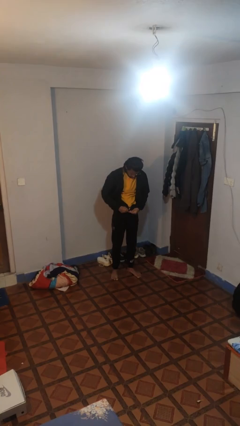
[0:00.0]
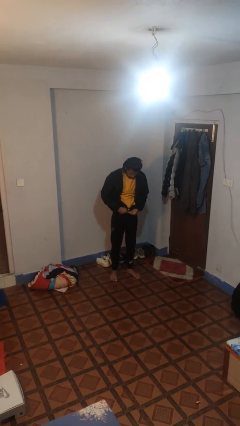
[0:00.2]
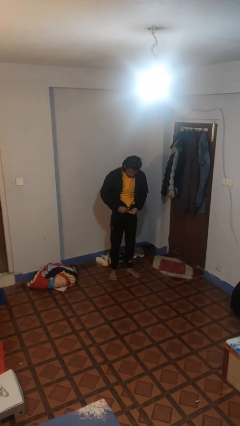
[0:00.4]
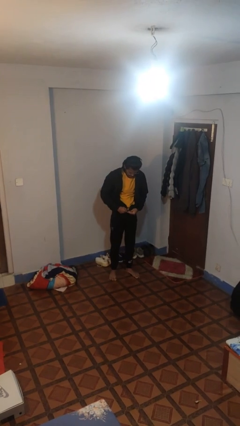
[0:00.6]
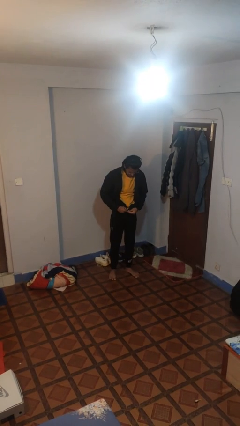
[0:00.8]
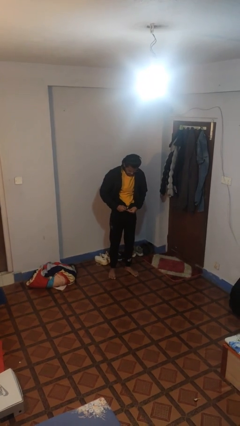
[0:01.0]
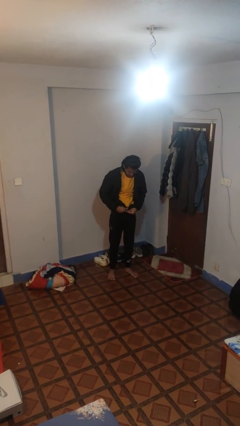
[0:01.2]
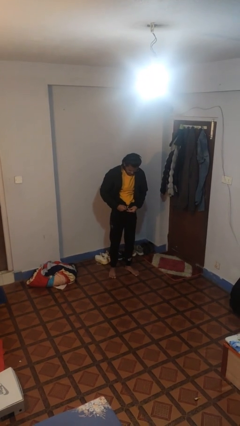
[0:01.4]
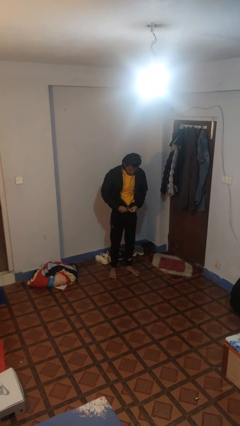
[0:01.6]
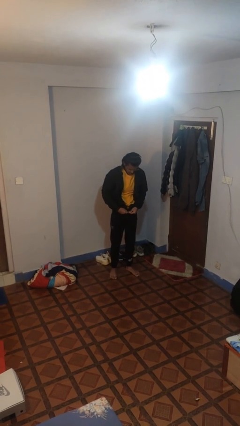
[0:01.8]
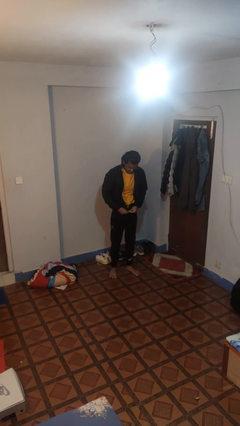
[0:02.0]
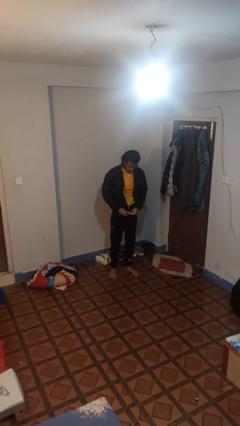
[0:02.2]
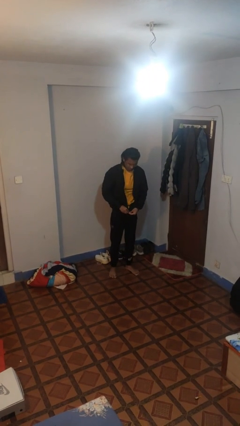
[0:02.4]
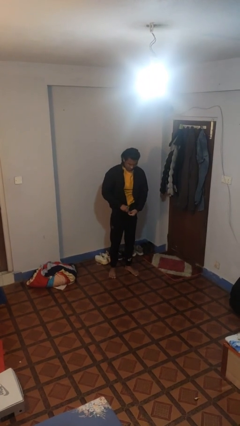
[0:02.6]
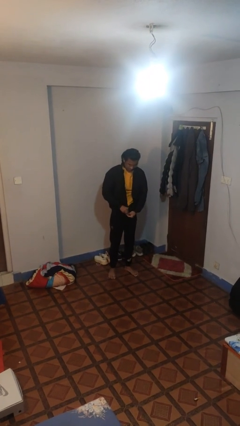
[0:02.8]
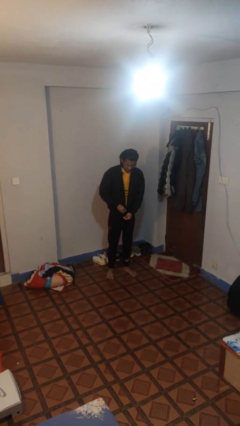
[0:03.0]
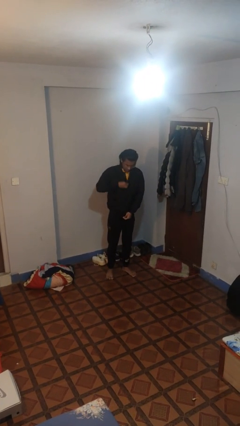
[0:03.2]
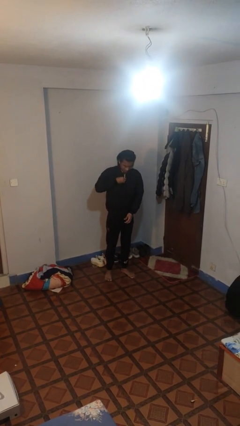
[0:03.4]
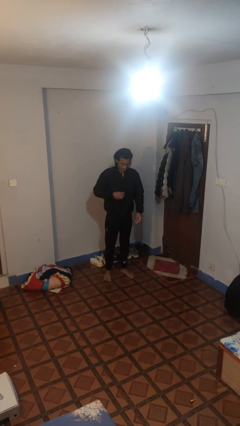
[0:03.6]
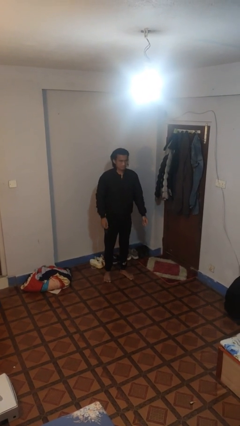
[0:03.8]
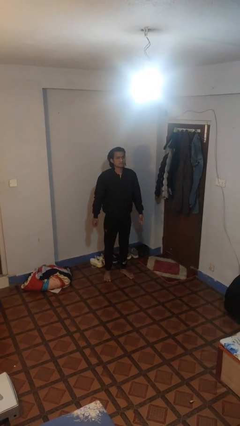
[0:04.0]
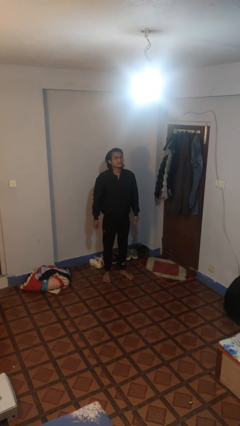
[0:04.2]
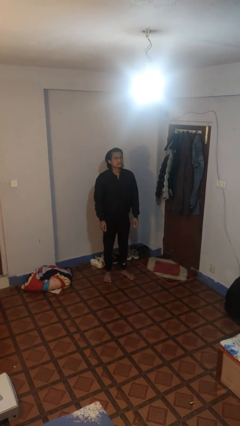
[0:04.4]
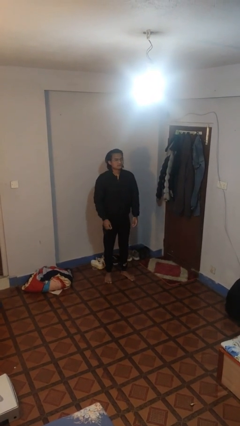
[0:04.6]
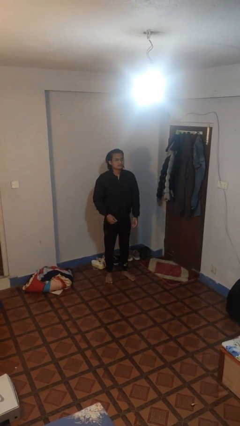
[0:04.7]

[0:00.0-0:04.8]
person zips up jacket

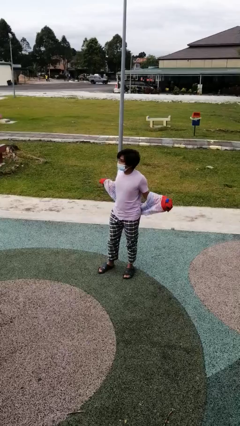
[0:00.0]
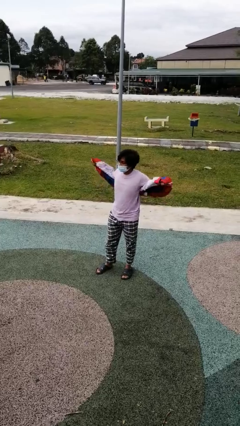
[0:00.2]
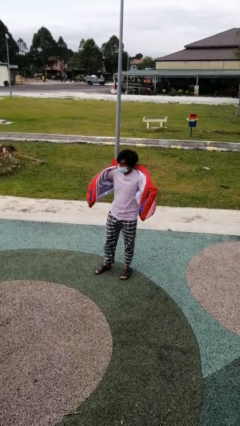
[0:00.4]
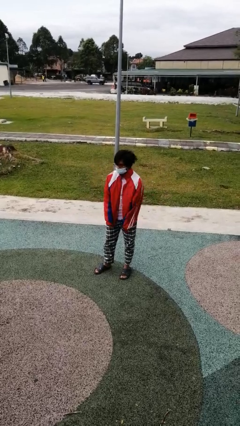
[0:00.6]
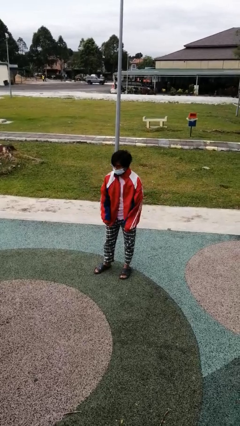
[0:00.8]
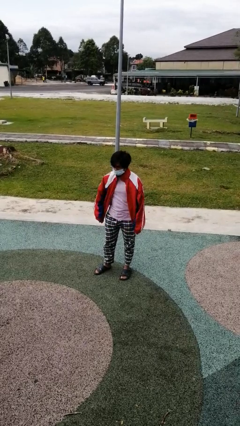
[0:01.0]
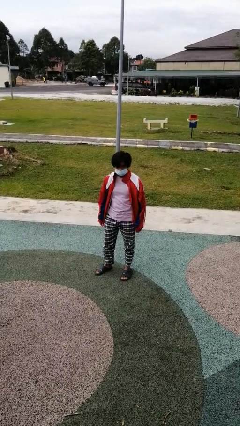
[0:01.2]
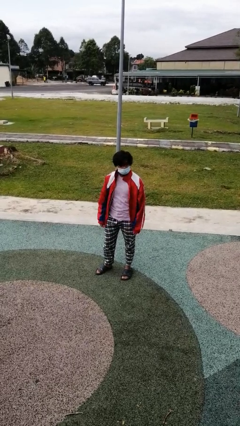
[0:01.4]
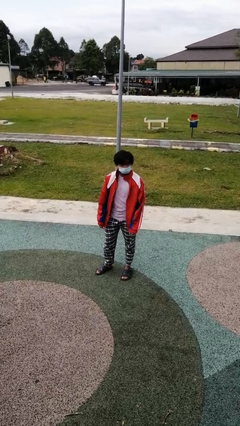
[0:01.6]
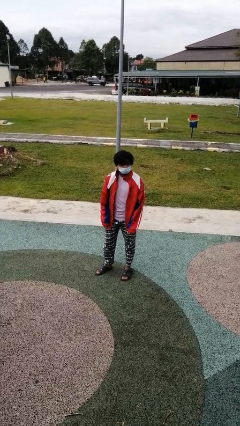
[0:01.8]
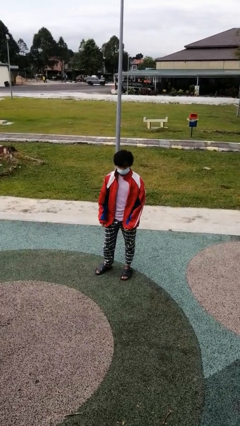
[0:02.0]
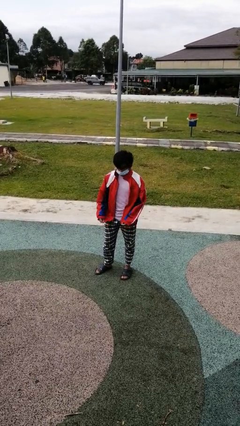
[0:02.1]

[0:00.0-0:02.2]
person puts on jacket

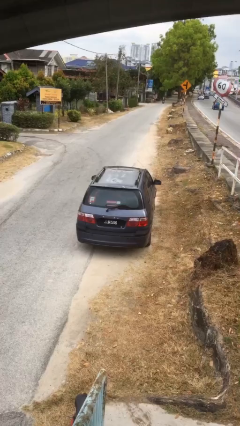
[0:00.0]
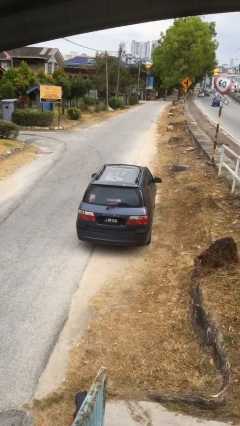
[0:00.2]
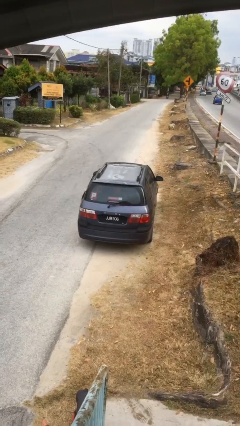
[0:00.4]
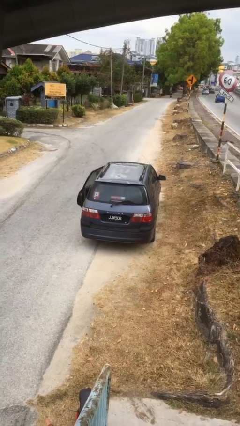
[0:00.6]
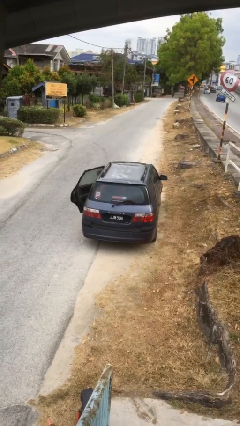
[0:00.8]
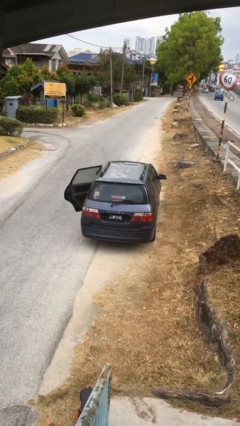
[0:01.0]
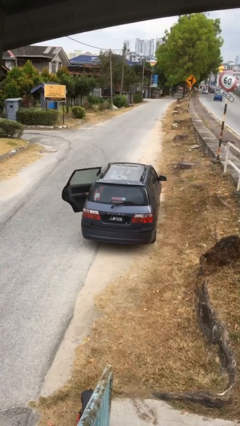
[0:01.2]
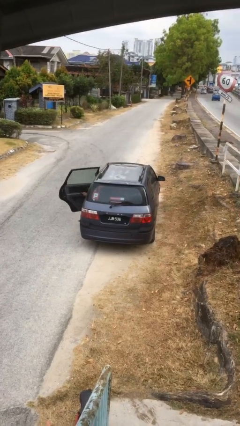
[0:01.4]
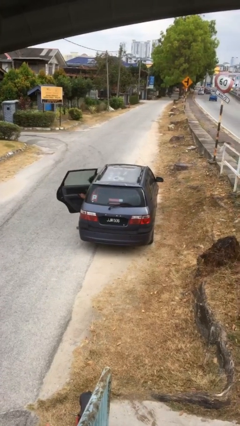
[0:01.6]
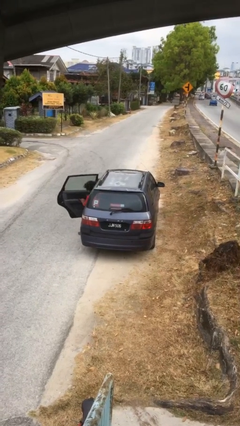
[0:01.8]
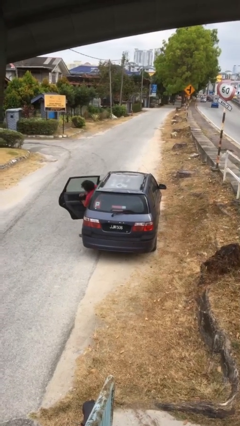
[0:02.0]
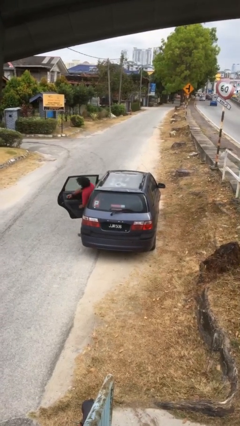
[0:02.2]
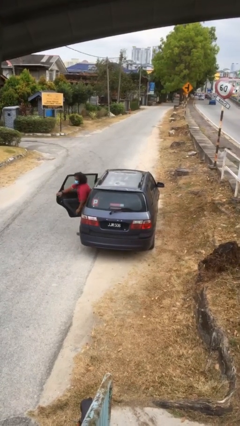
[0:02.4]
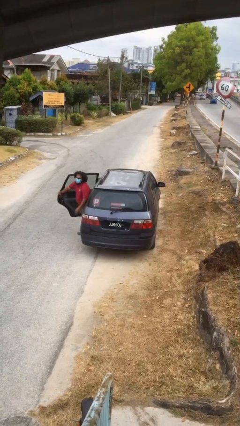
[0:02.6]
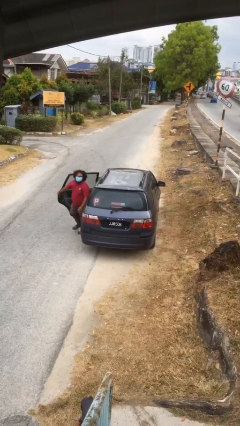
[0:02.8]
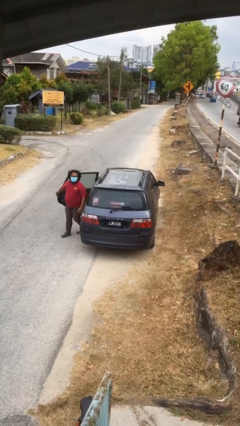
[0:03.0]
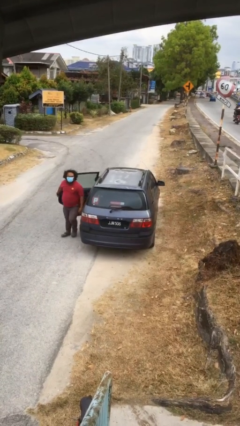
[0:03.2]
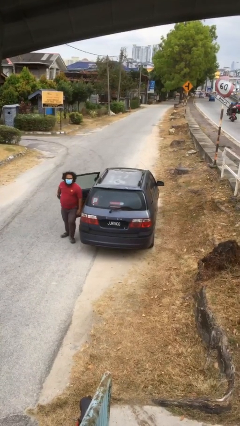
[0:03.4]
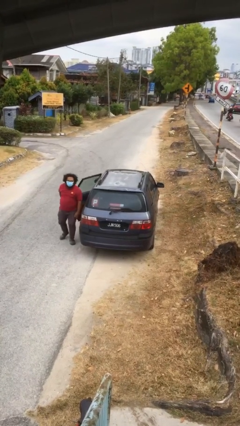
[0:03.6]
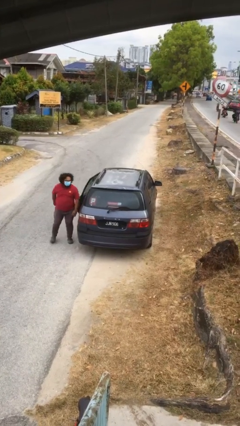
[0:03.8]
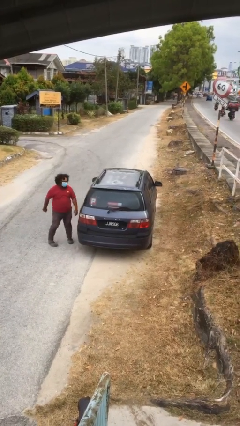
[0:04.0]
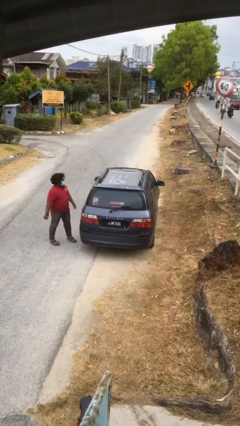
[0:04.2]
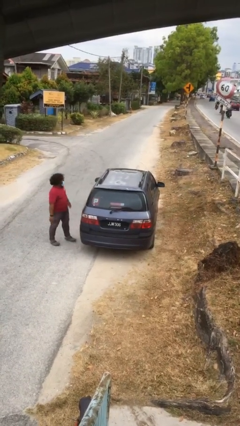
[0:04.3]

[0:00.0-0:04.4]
car drops off person

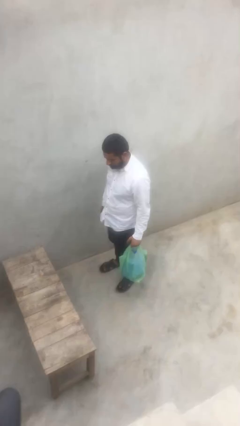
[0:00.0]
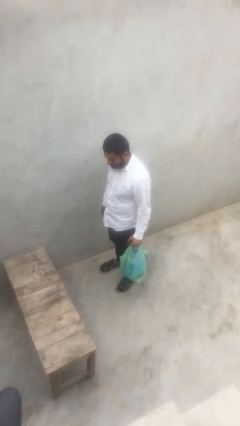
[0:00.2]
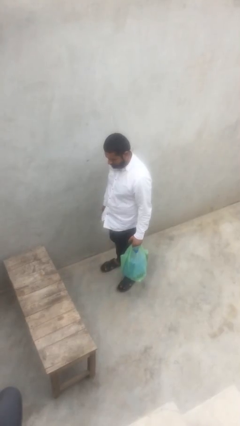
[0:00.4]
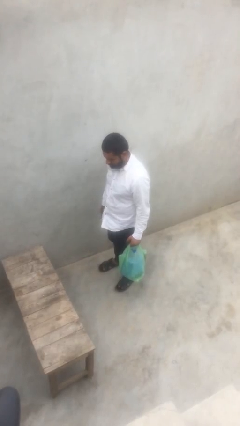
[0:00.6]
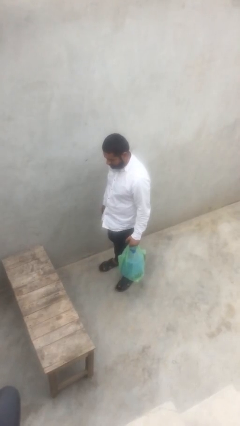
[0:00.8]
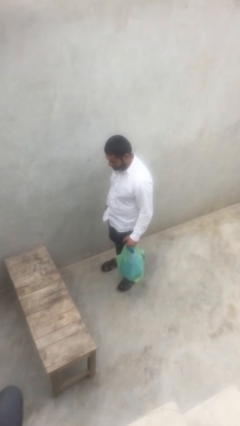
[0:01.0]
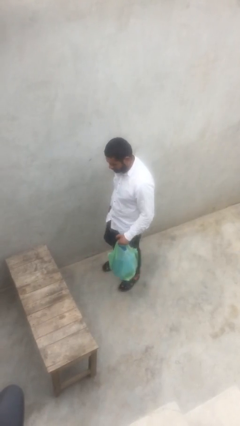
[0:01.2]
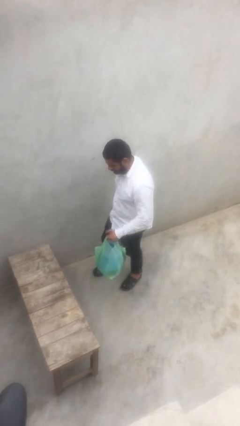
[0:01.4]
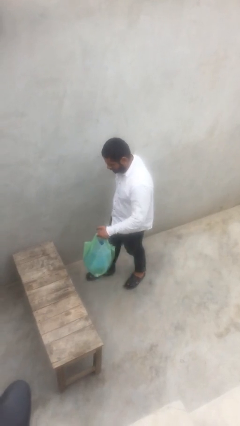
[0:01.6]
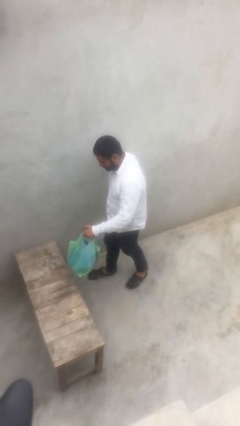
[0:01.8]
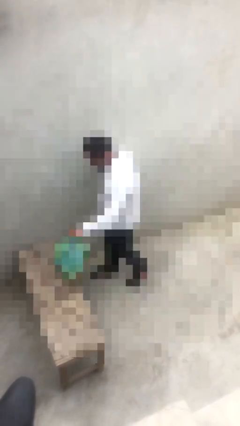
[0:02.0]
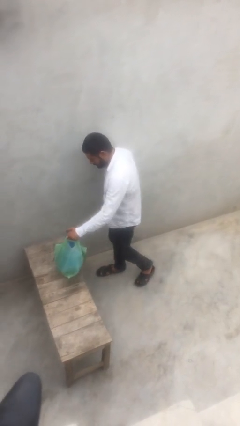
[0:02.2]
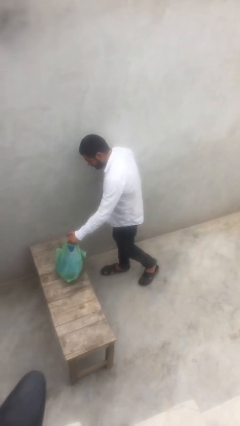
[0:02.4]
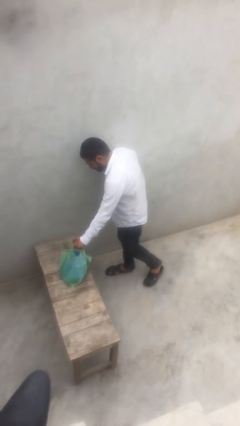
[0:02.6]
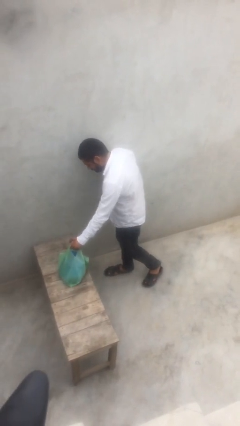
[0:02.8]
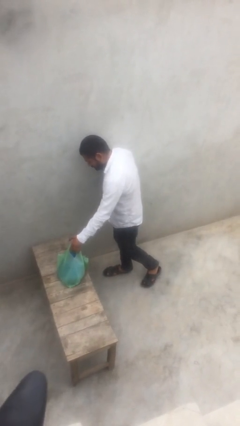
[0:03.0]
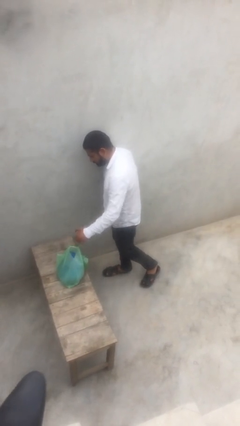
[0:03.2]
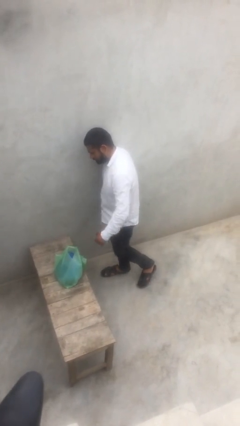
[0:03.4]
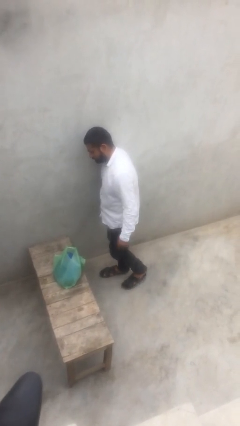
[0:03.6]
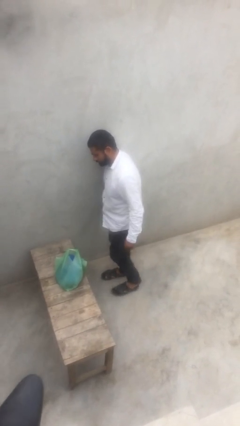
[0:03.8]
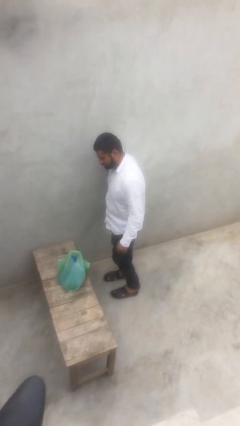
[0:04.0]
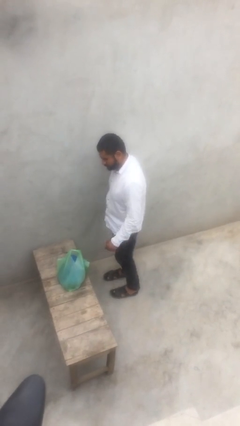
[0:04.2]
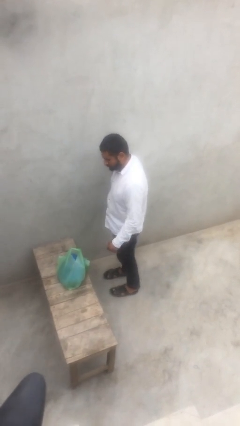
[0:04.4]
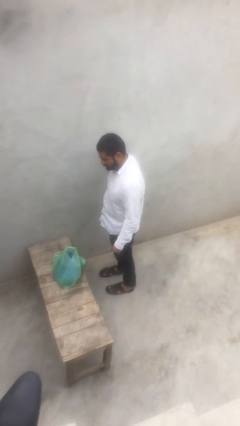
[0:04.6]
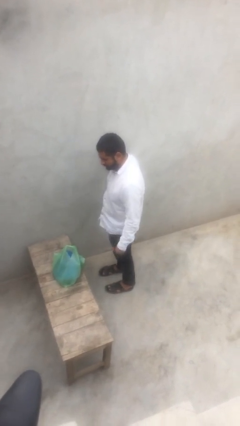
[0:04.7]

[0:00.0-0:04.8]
person puts down object on table

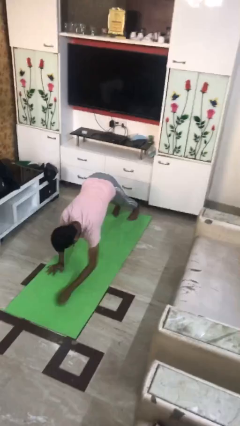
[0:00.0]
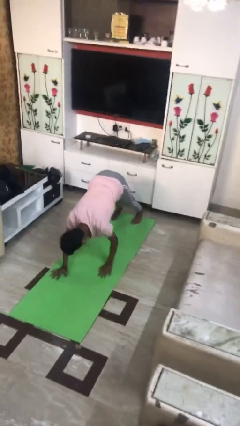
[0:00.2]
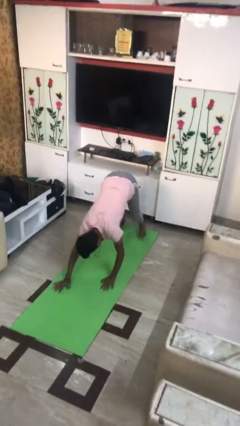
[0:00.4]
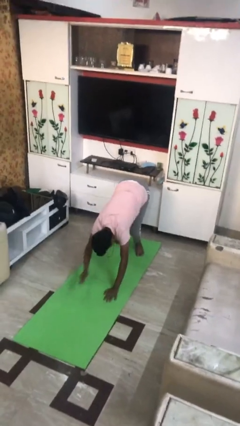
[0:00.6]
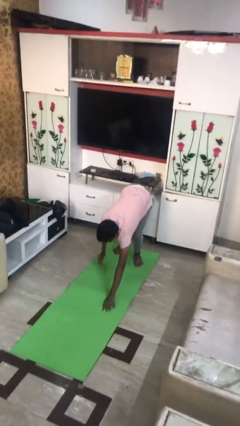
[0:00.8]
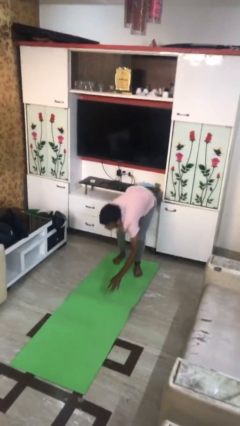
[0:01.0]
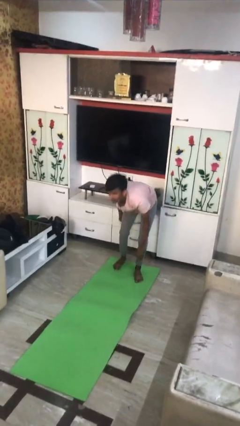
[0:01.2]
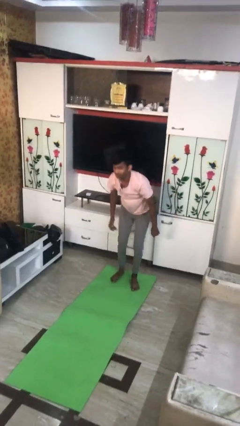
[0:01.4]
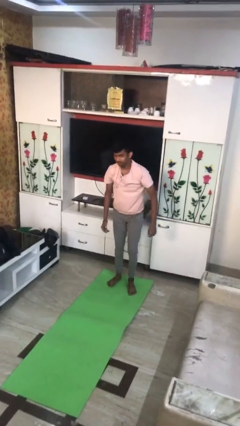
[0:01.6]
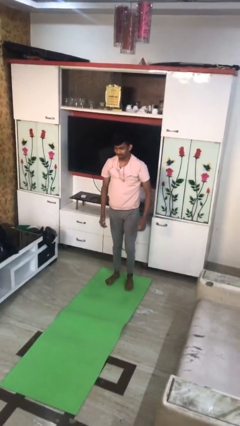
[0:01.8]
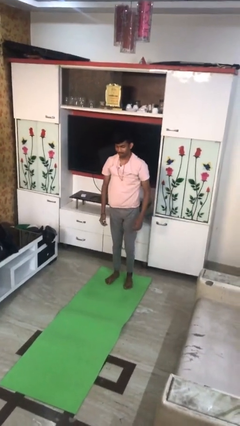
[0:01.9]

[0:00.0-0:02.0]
person stands up from floor
